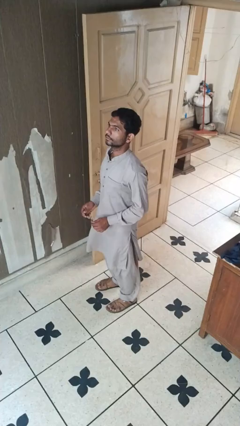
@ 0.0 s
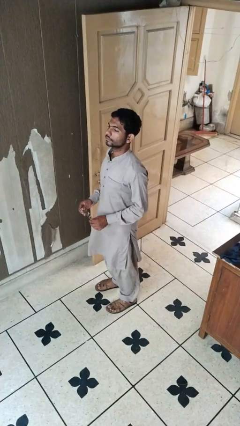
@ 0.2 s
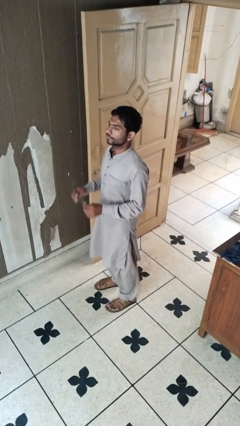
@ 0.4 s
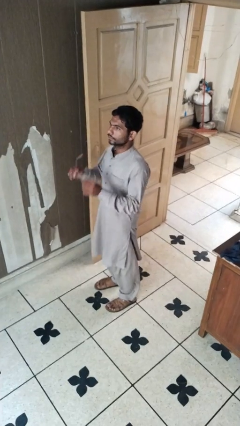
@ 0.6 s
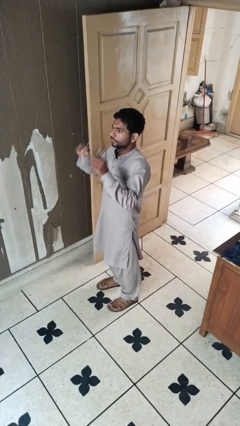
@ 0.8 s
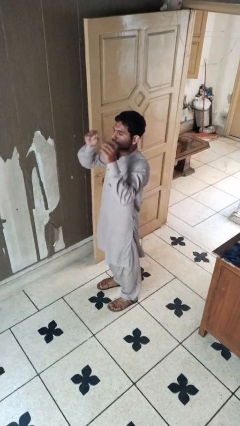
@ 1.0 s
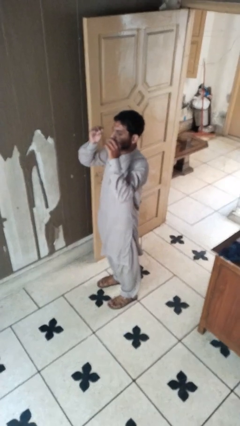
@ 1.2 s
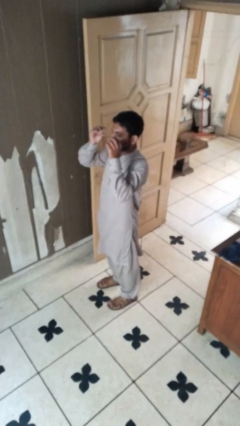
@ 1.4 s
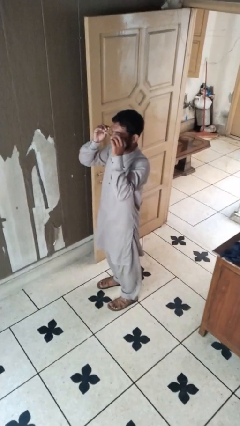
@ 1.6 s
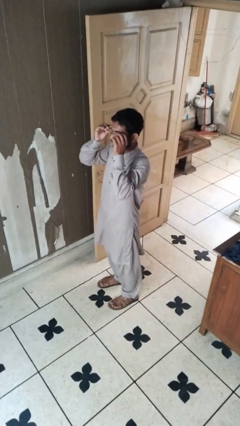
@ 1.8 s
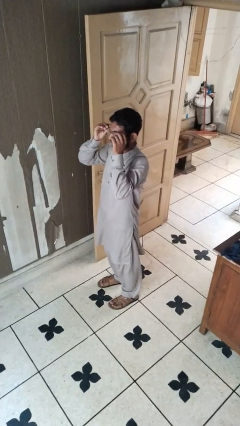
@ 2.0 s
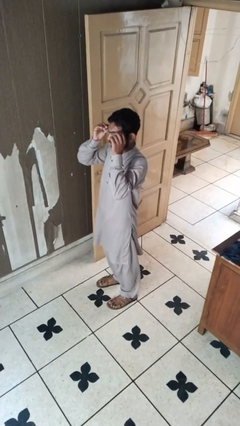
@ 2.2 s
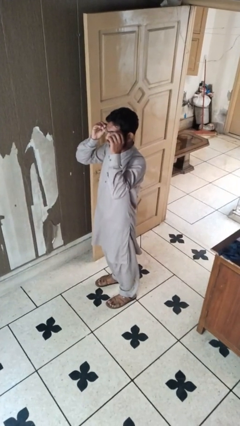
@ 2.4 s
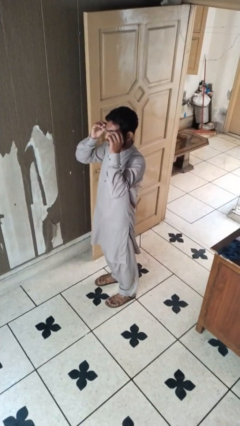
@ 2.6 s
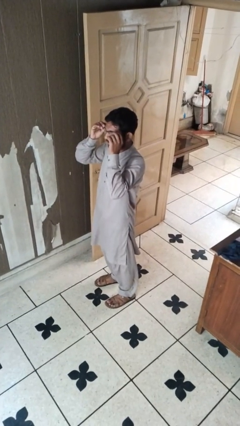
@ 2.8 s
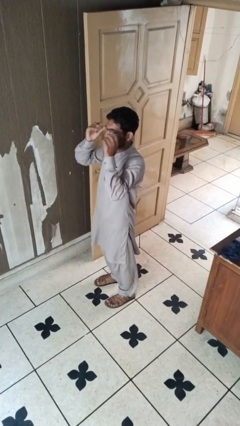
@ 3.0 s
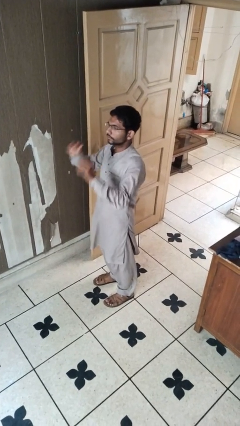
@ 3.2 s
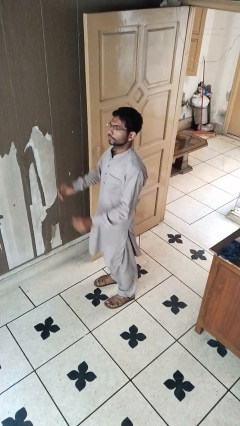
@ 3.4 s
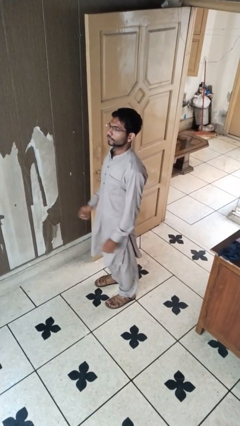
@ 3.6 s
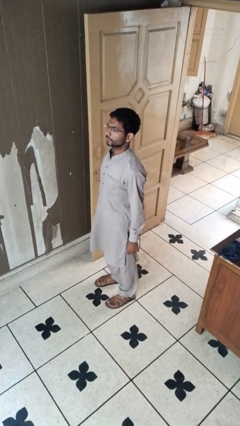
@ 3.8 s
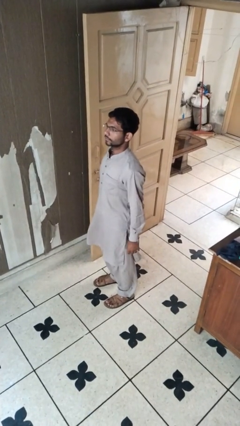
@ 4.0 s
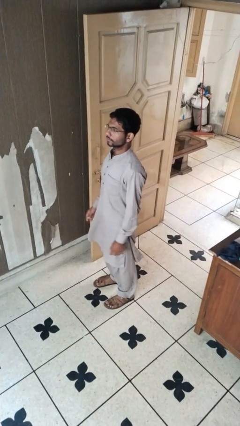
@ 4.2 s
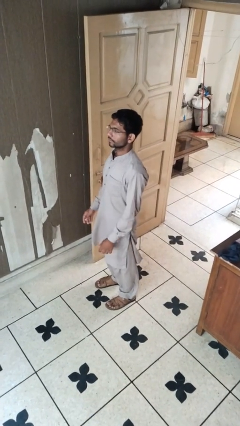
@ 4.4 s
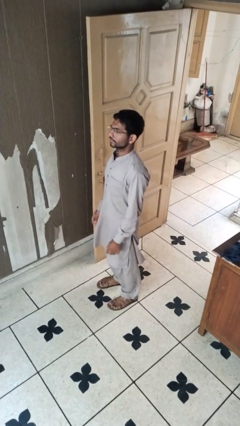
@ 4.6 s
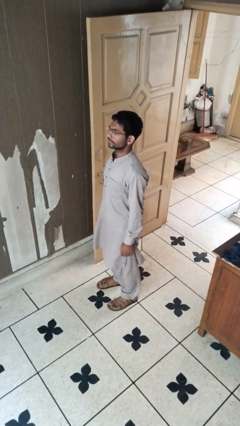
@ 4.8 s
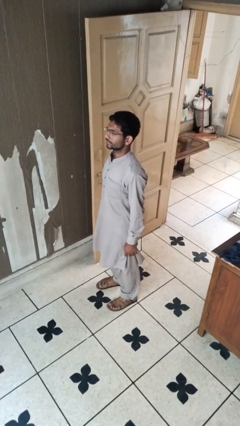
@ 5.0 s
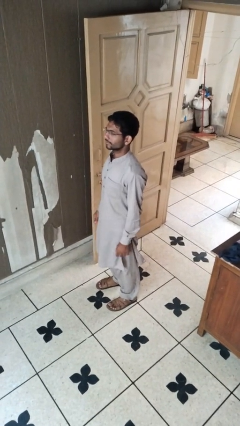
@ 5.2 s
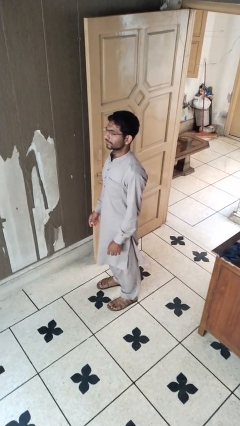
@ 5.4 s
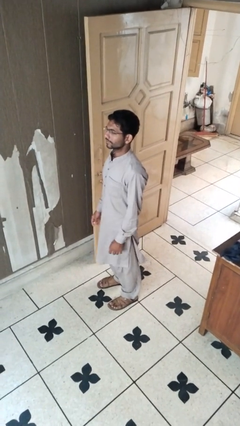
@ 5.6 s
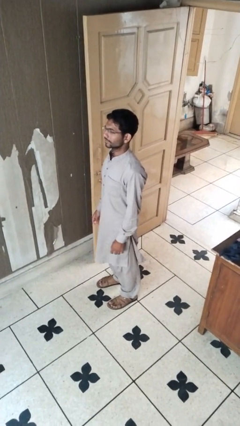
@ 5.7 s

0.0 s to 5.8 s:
person puts on glasses

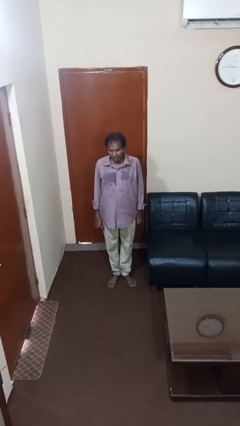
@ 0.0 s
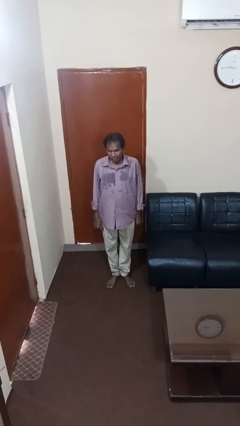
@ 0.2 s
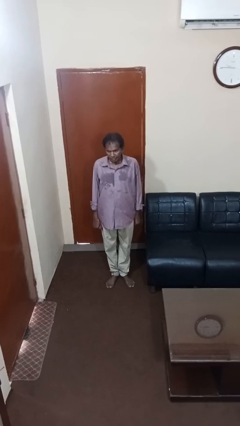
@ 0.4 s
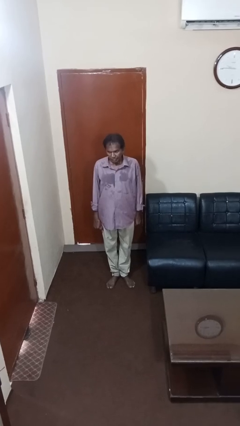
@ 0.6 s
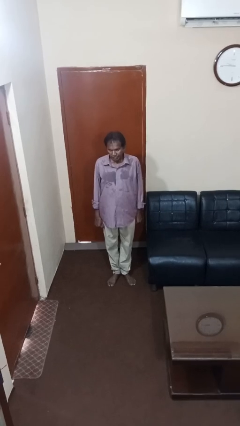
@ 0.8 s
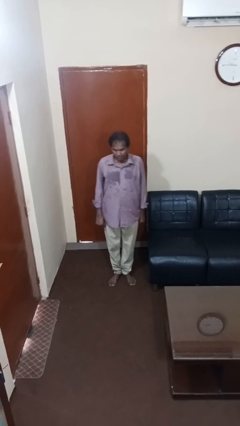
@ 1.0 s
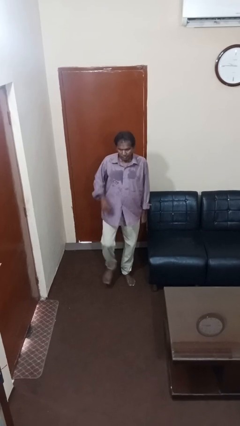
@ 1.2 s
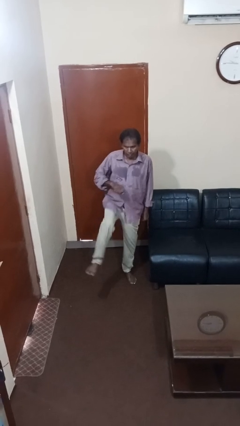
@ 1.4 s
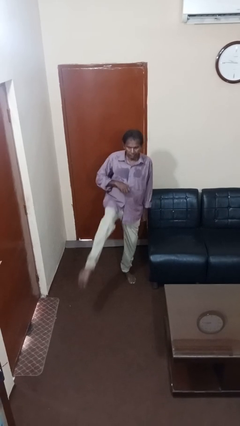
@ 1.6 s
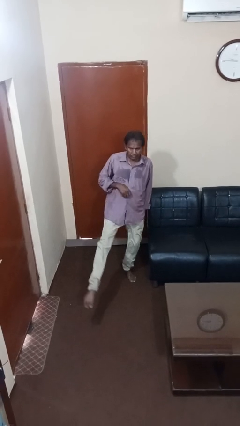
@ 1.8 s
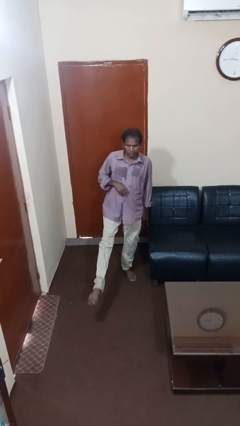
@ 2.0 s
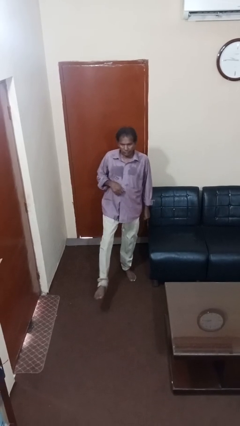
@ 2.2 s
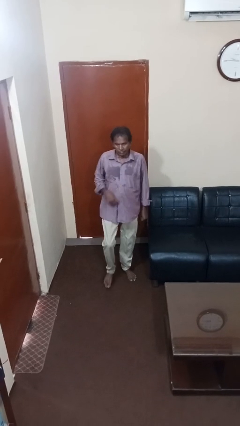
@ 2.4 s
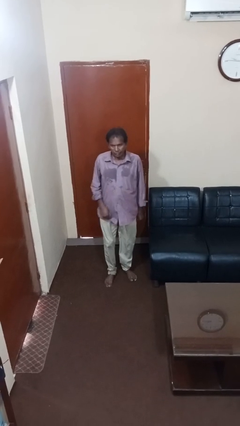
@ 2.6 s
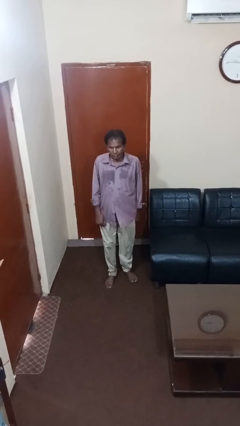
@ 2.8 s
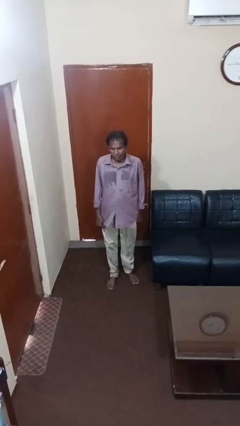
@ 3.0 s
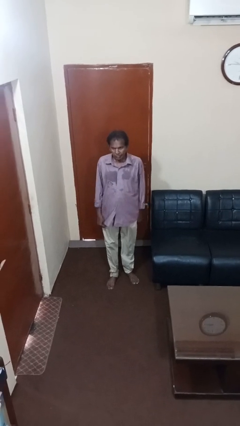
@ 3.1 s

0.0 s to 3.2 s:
person karate kicks

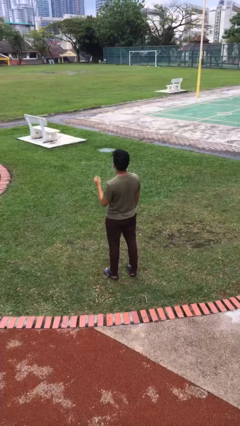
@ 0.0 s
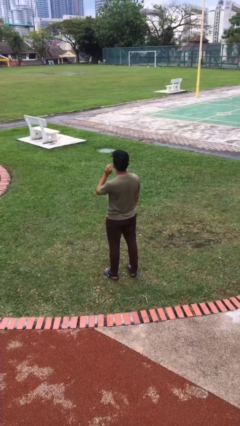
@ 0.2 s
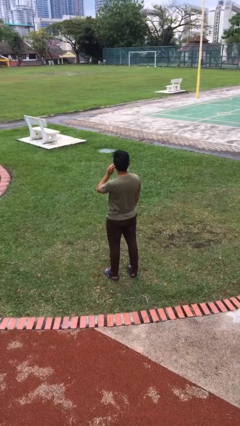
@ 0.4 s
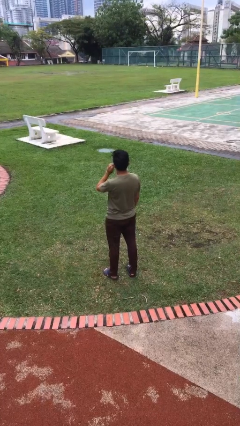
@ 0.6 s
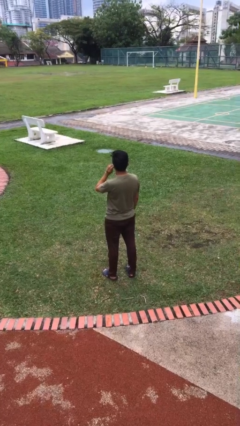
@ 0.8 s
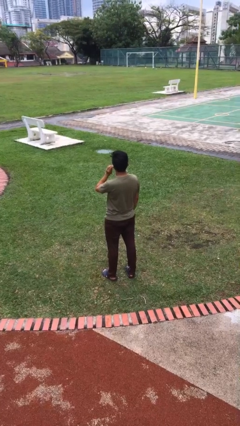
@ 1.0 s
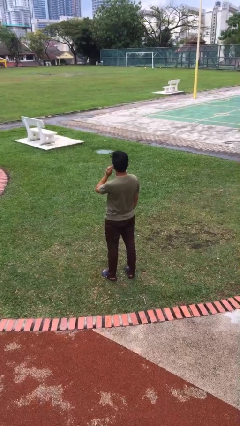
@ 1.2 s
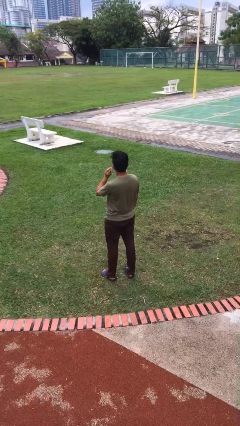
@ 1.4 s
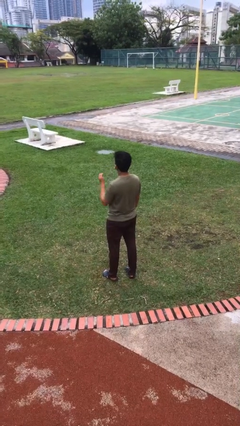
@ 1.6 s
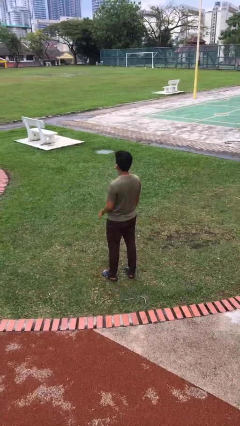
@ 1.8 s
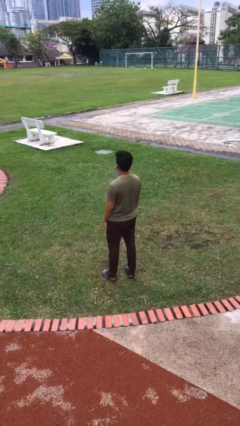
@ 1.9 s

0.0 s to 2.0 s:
person touches earlobe

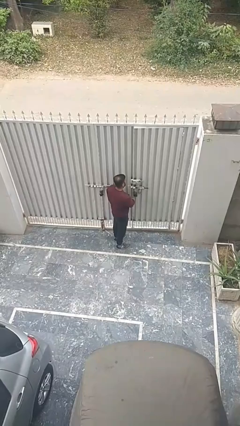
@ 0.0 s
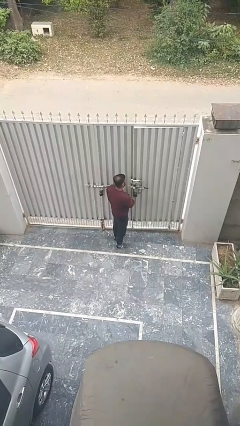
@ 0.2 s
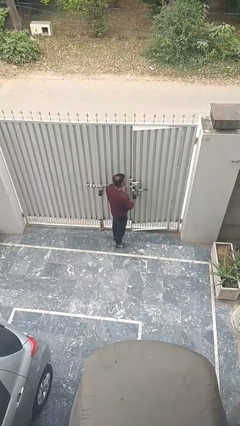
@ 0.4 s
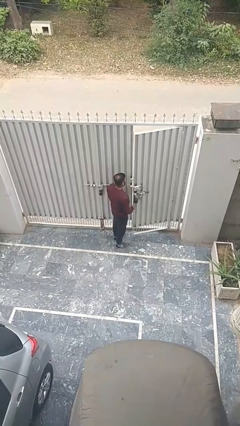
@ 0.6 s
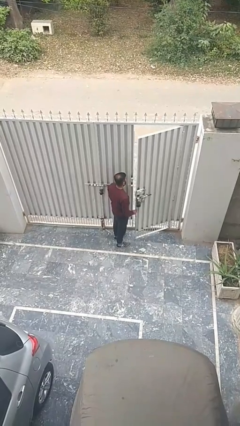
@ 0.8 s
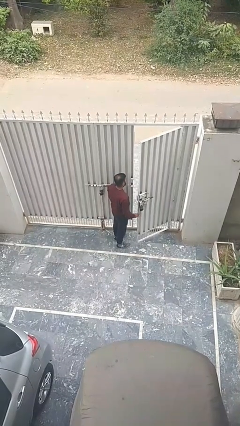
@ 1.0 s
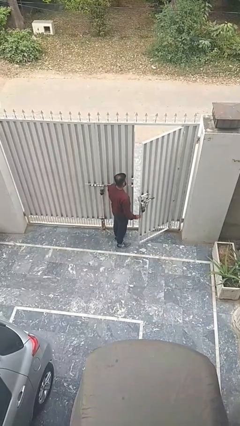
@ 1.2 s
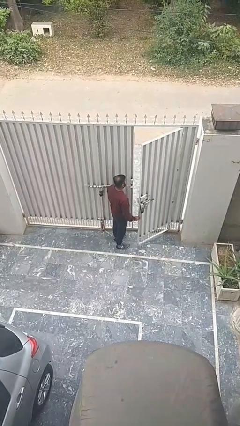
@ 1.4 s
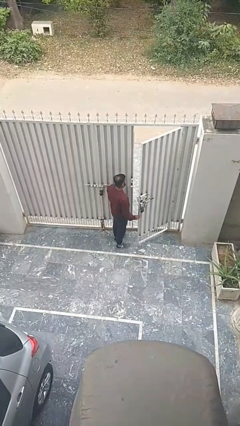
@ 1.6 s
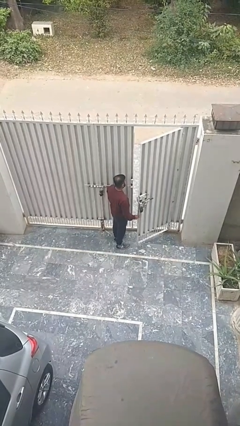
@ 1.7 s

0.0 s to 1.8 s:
person opens facility door

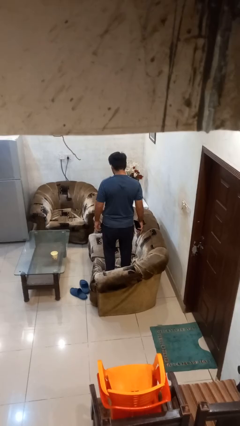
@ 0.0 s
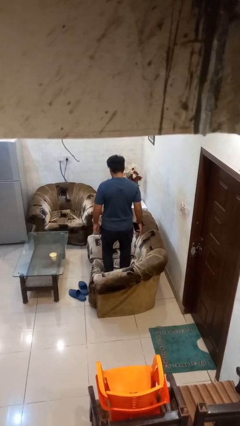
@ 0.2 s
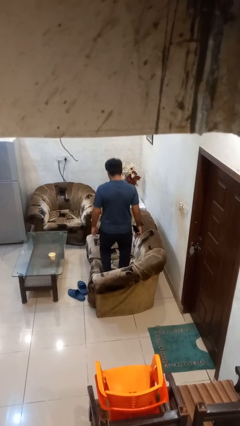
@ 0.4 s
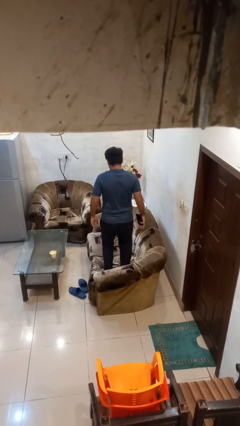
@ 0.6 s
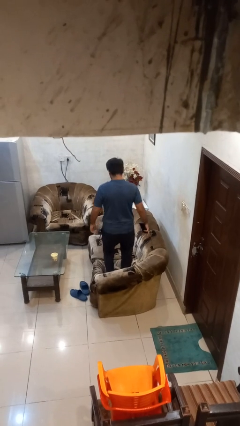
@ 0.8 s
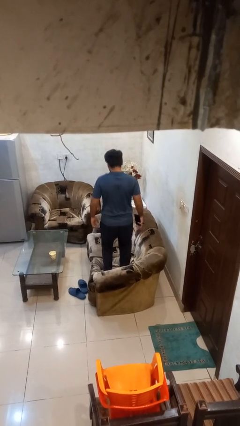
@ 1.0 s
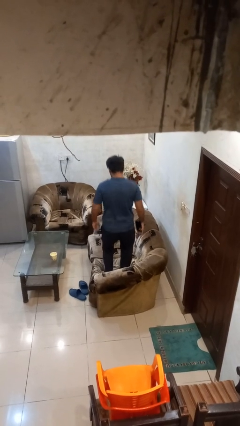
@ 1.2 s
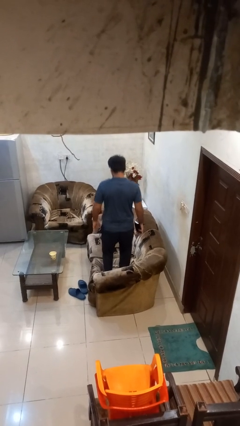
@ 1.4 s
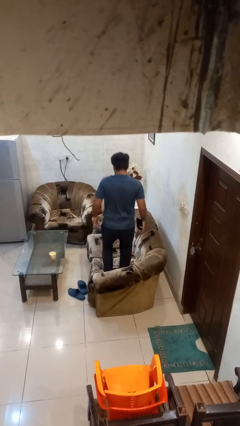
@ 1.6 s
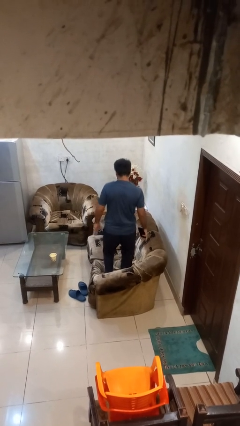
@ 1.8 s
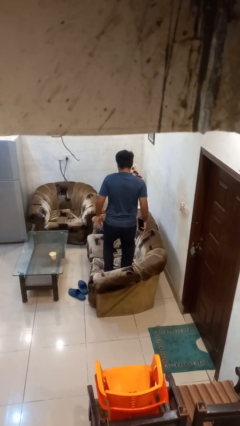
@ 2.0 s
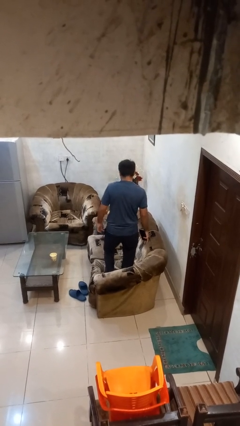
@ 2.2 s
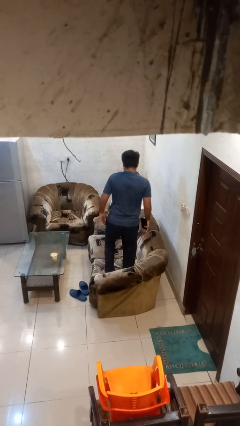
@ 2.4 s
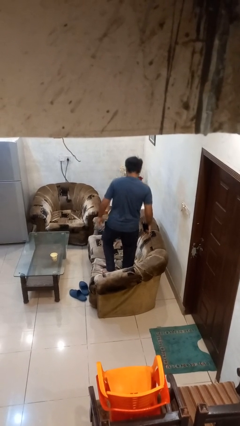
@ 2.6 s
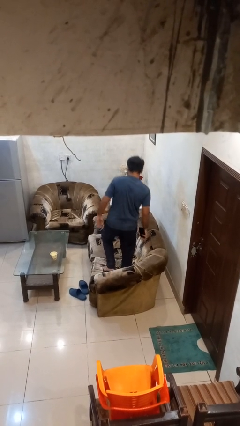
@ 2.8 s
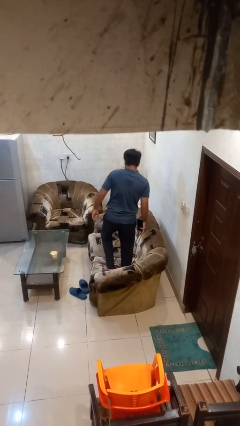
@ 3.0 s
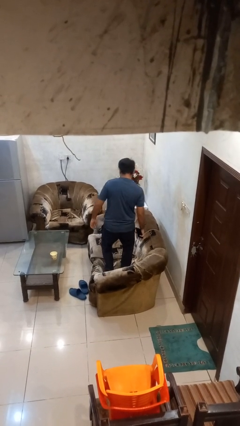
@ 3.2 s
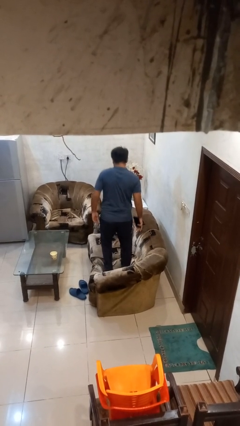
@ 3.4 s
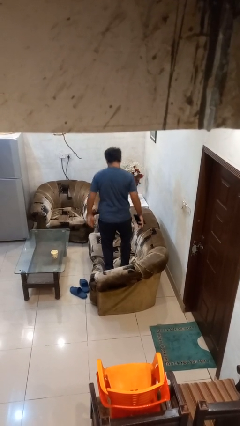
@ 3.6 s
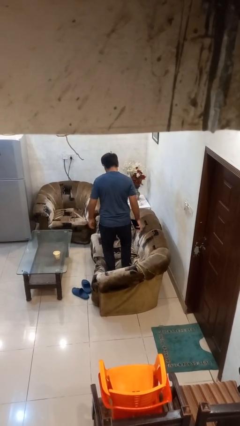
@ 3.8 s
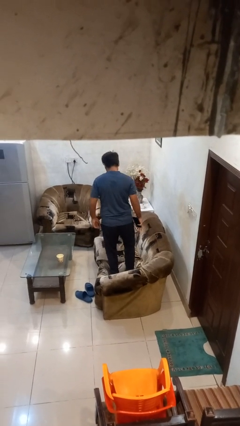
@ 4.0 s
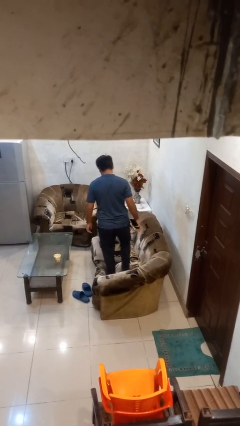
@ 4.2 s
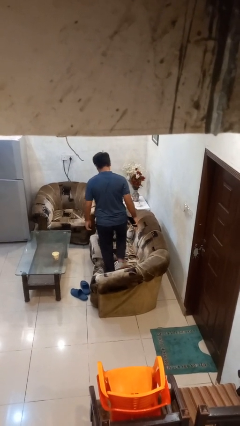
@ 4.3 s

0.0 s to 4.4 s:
person jumps on couch

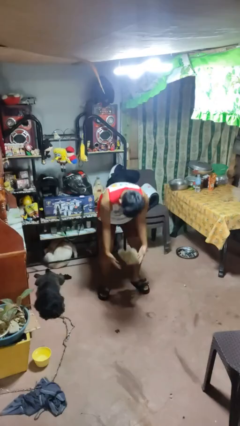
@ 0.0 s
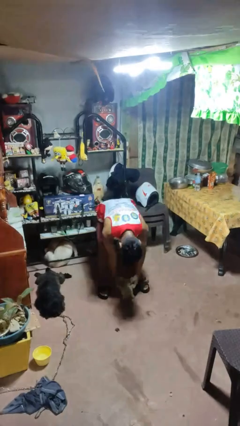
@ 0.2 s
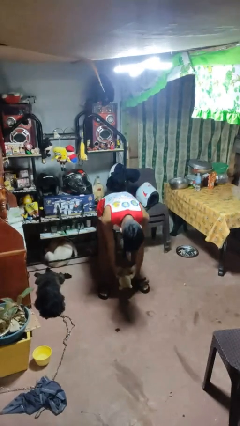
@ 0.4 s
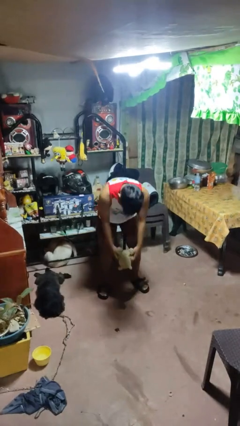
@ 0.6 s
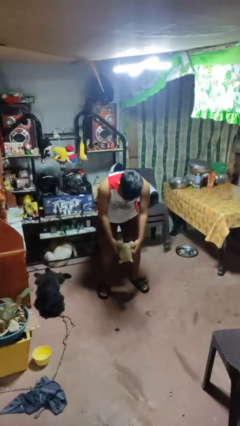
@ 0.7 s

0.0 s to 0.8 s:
person catches dropped object
